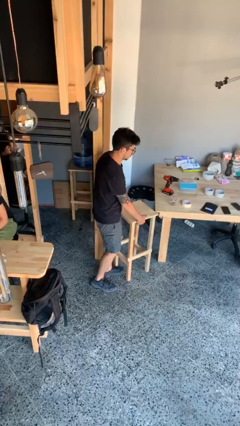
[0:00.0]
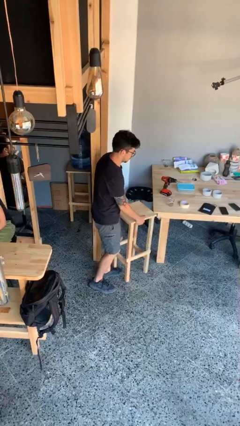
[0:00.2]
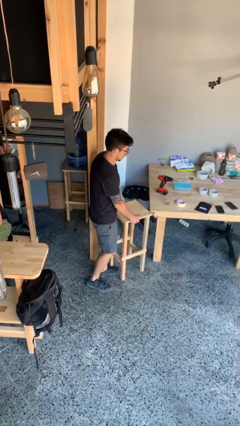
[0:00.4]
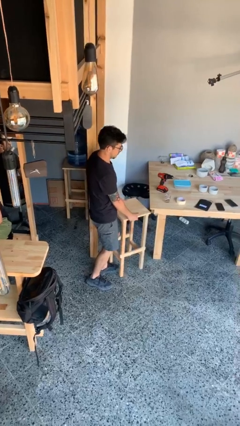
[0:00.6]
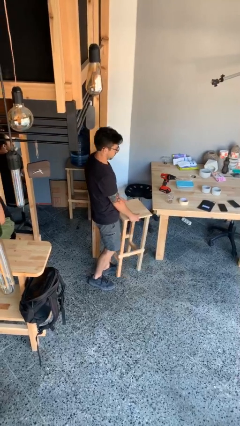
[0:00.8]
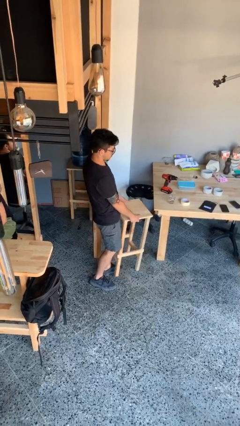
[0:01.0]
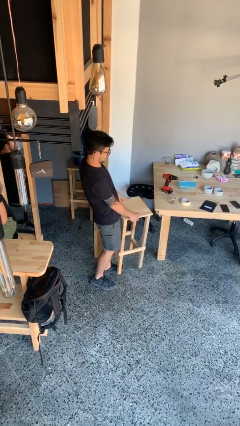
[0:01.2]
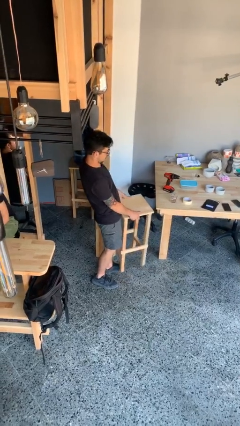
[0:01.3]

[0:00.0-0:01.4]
person picks up object from floor

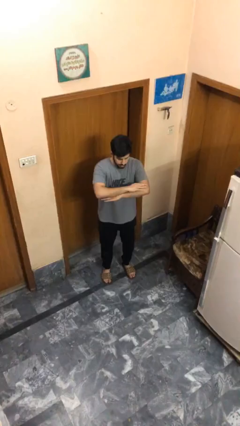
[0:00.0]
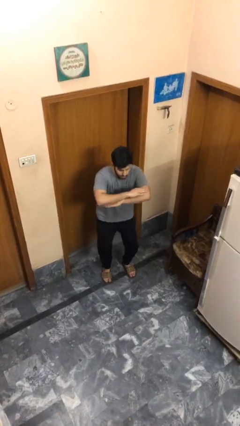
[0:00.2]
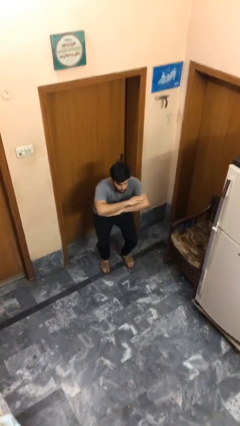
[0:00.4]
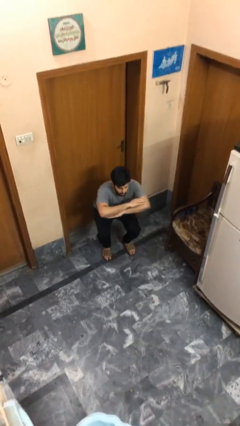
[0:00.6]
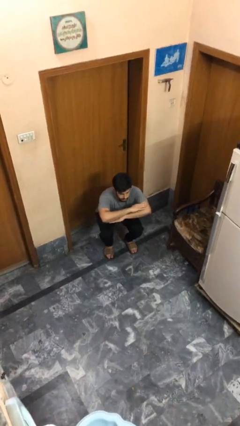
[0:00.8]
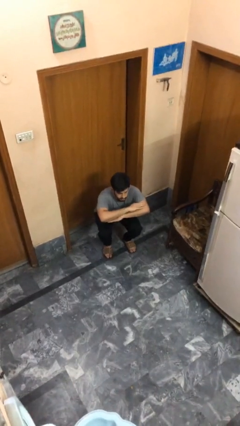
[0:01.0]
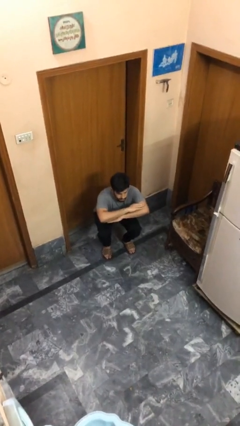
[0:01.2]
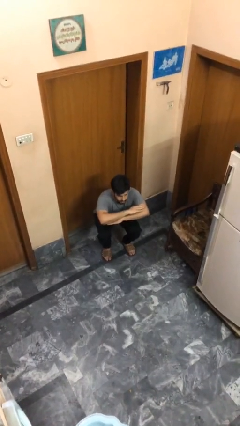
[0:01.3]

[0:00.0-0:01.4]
person squats

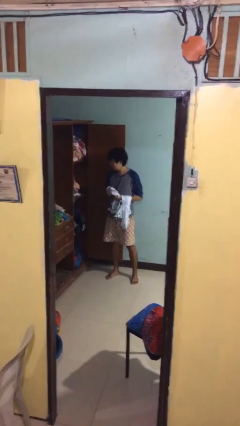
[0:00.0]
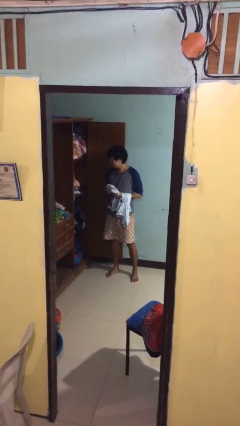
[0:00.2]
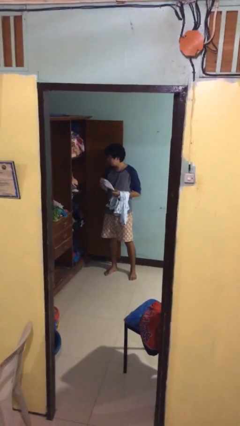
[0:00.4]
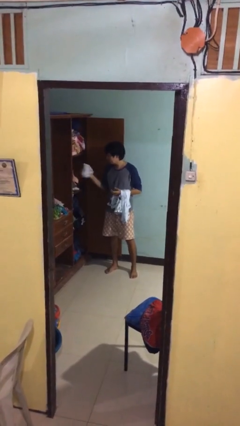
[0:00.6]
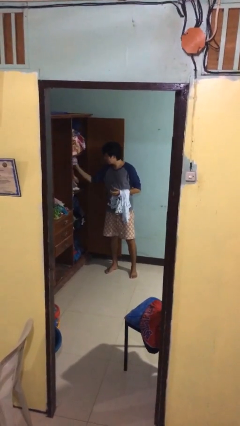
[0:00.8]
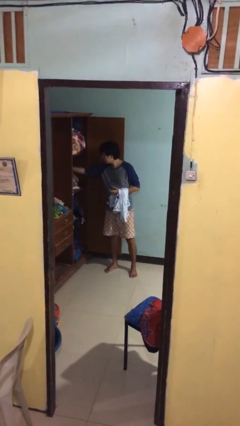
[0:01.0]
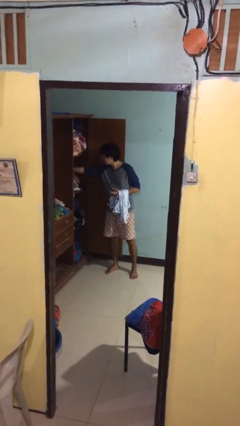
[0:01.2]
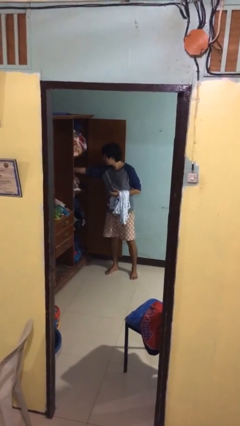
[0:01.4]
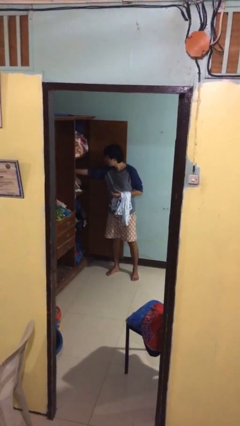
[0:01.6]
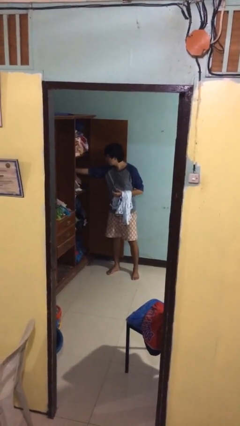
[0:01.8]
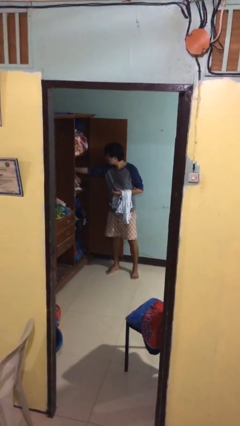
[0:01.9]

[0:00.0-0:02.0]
person puts clothes into dresser

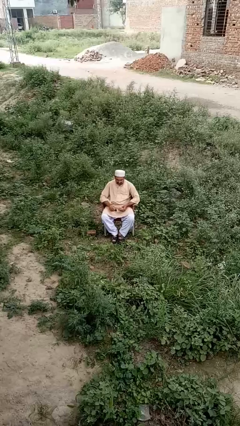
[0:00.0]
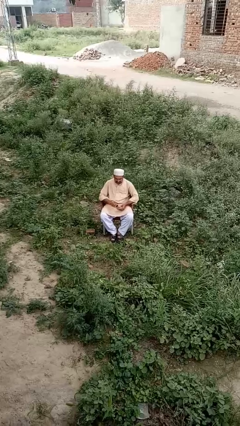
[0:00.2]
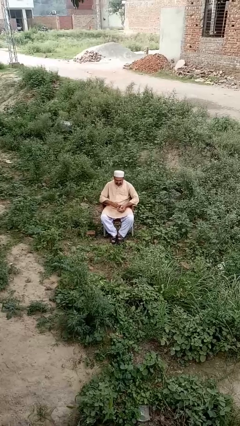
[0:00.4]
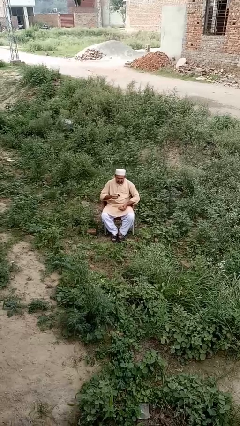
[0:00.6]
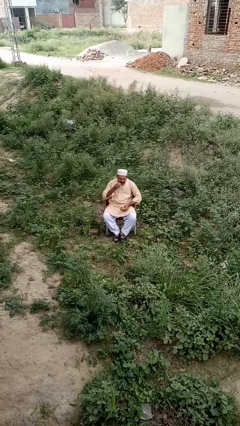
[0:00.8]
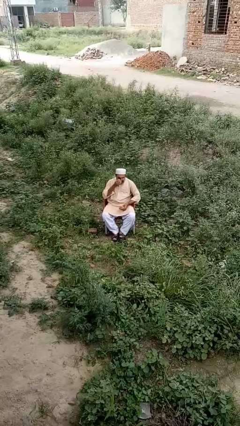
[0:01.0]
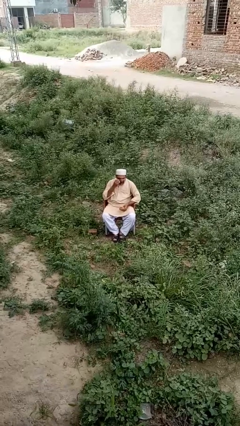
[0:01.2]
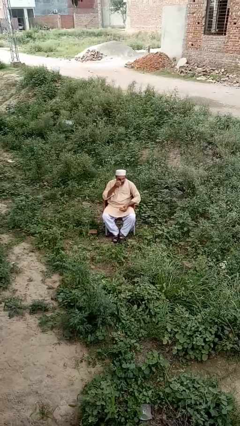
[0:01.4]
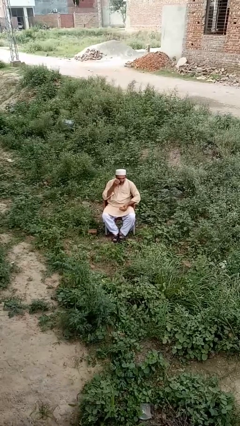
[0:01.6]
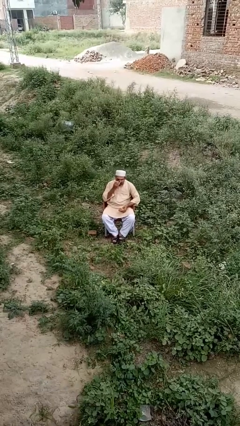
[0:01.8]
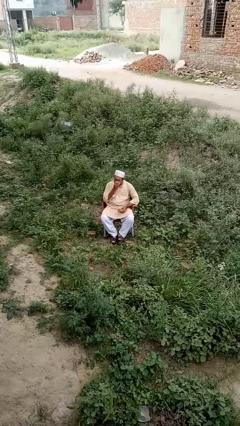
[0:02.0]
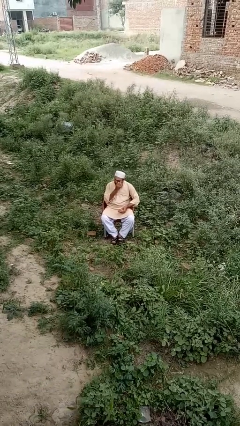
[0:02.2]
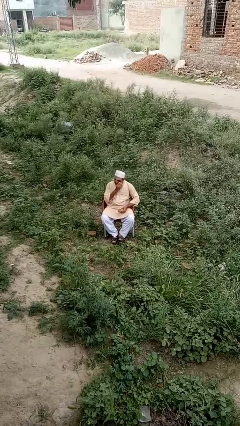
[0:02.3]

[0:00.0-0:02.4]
person shades eyes

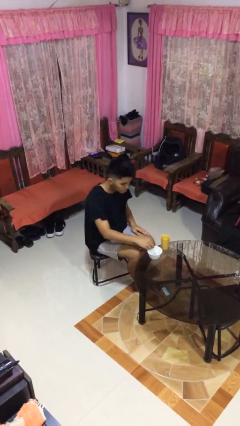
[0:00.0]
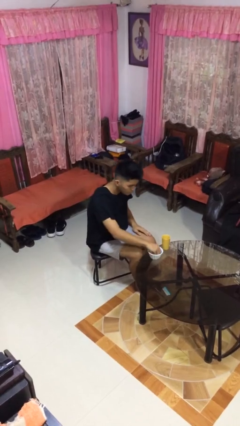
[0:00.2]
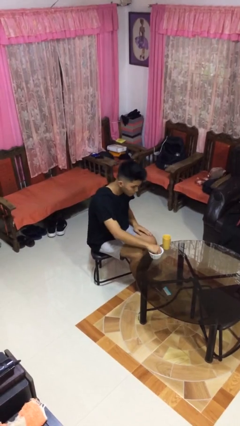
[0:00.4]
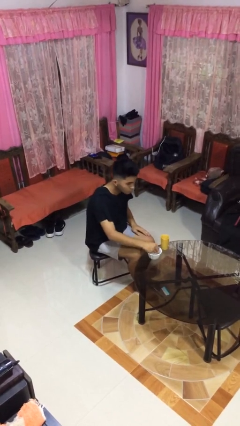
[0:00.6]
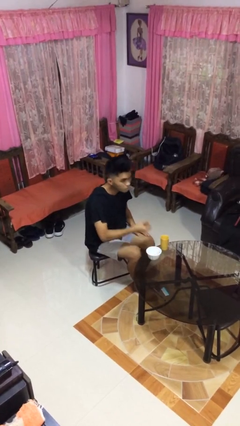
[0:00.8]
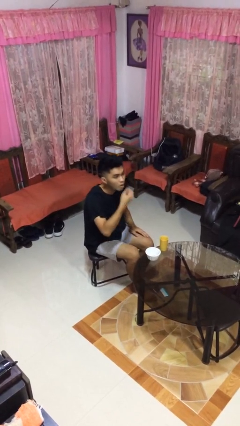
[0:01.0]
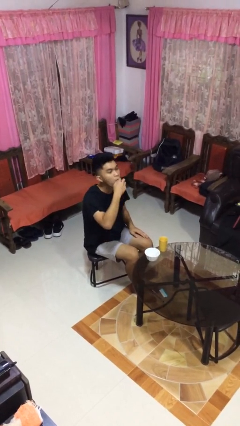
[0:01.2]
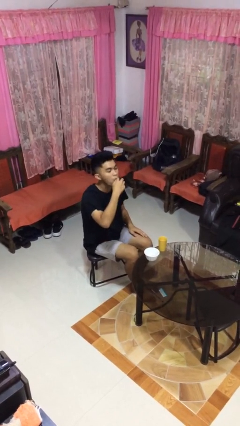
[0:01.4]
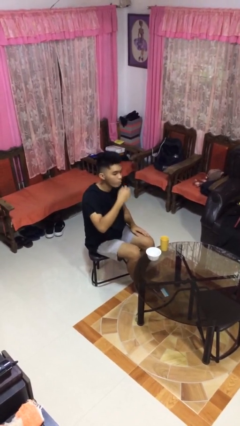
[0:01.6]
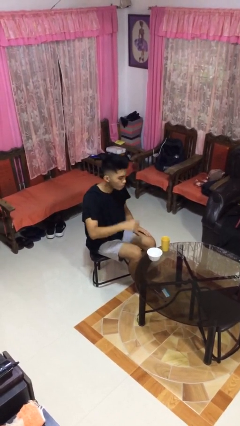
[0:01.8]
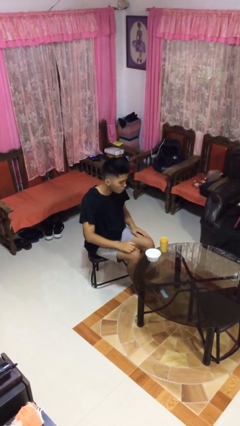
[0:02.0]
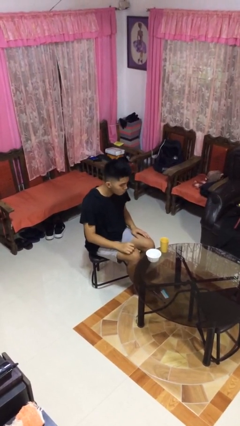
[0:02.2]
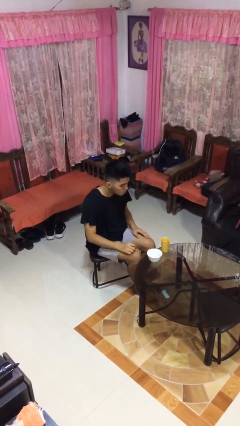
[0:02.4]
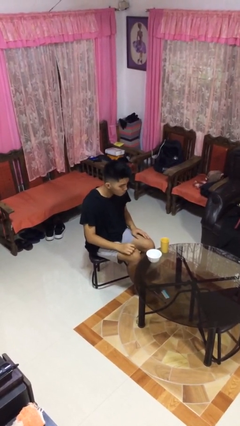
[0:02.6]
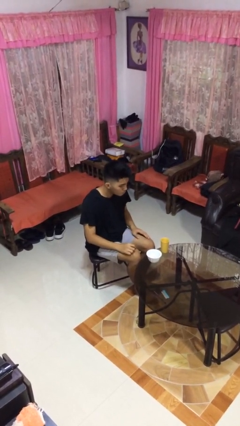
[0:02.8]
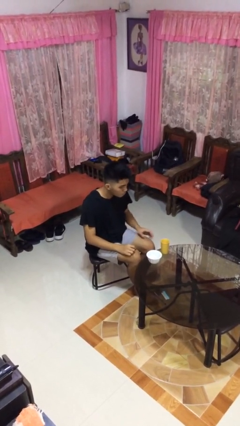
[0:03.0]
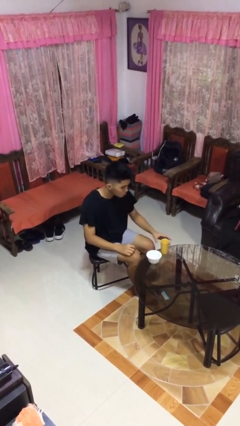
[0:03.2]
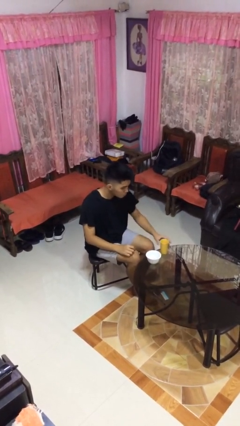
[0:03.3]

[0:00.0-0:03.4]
person takes medicine pills

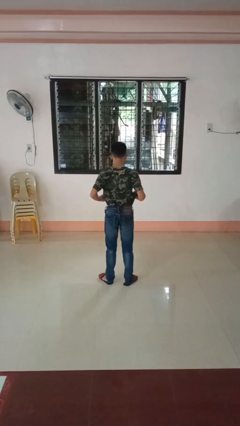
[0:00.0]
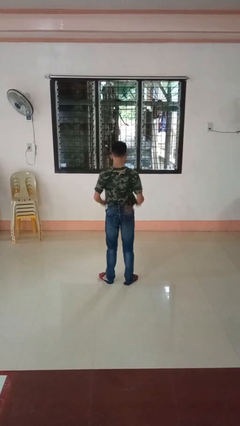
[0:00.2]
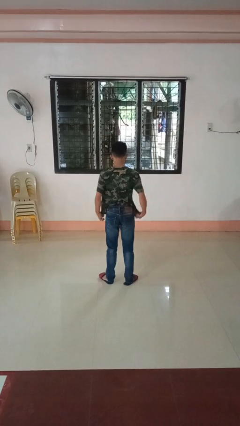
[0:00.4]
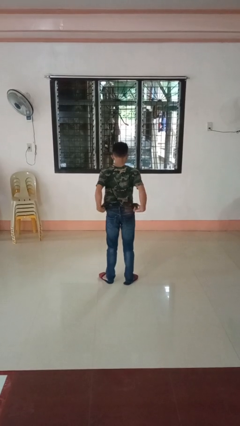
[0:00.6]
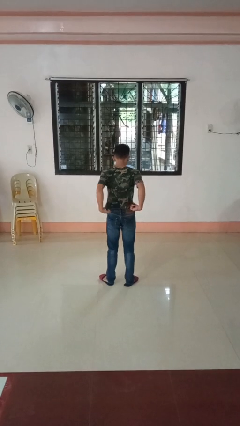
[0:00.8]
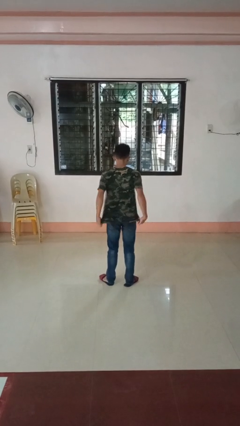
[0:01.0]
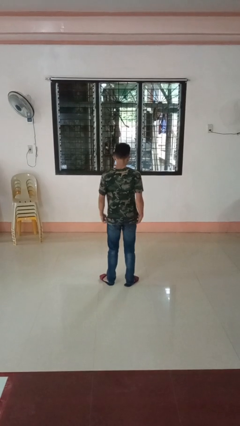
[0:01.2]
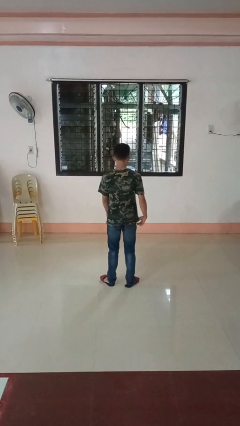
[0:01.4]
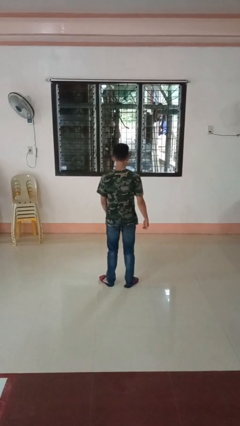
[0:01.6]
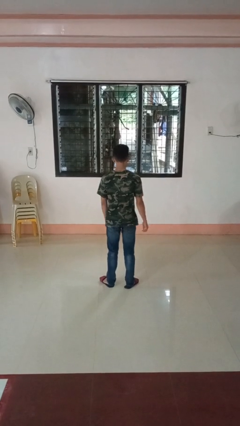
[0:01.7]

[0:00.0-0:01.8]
person untucks shirt

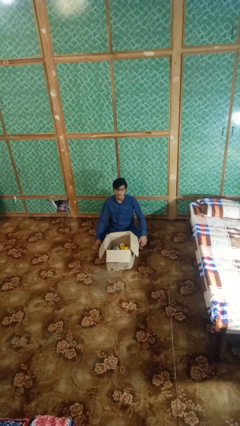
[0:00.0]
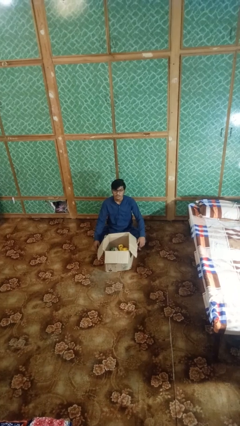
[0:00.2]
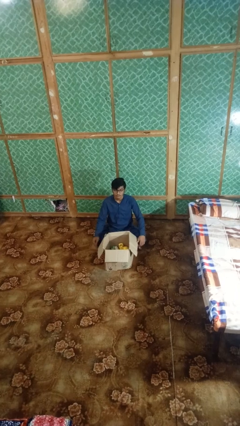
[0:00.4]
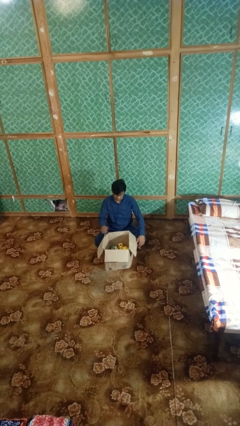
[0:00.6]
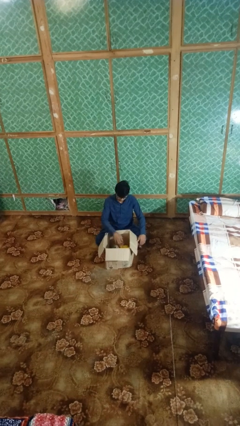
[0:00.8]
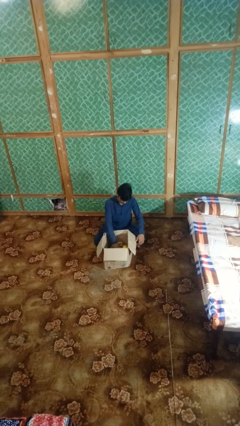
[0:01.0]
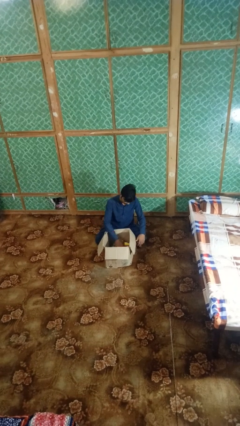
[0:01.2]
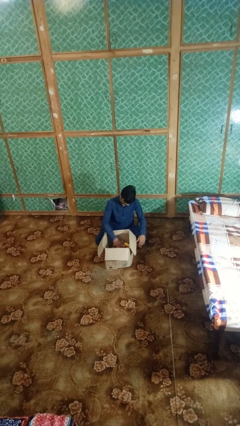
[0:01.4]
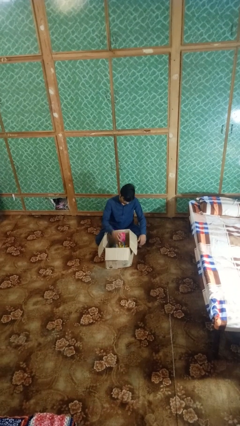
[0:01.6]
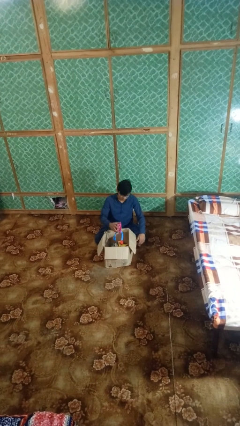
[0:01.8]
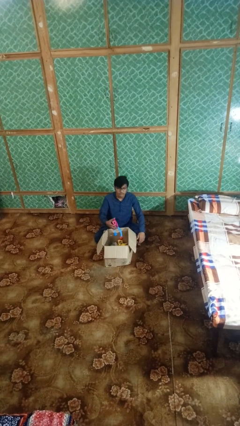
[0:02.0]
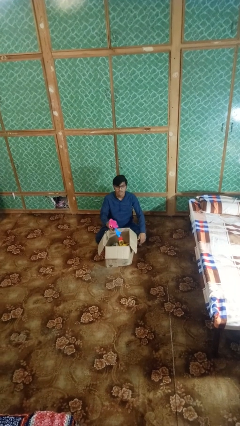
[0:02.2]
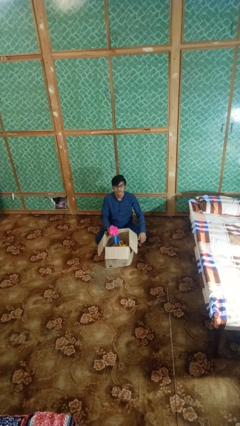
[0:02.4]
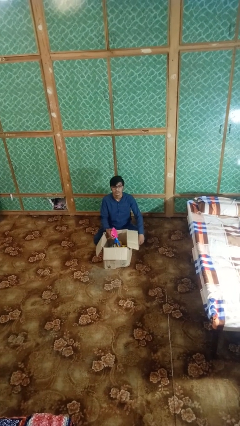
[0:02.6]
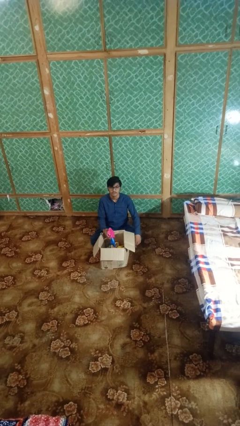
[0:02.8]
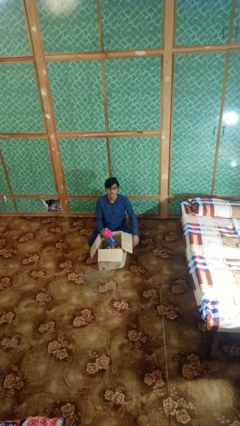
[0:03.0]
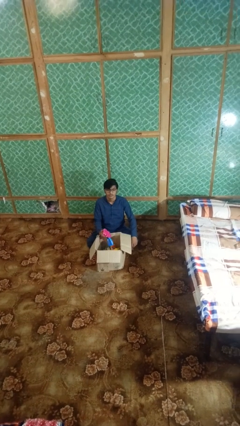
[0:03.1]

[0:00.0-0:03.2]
person takes object from box

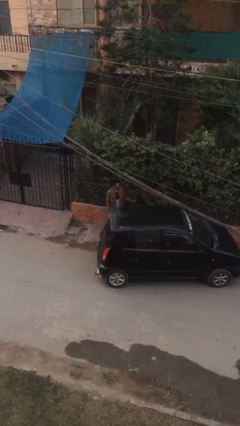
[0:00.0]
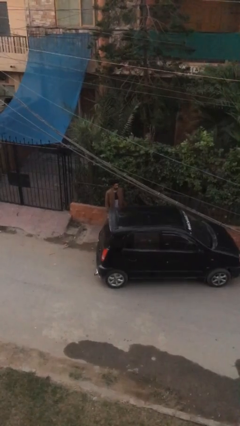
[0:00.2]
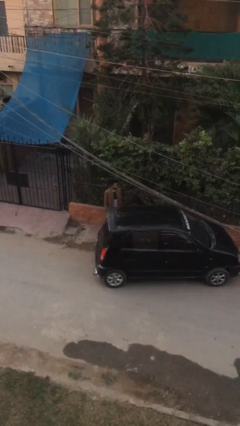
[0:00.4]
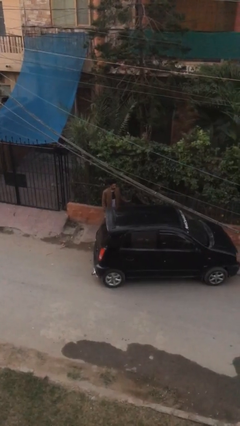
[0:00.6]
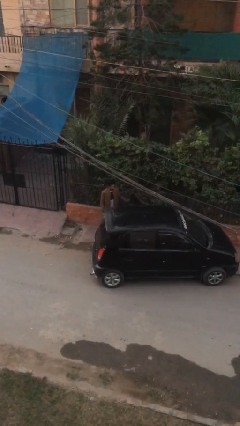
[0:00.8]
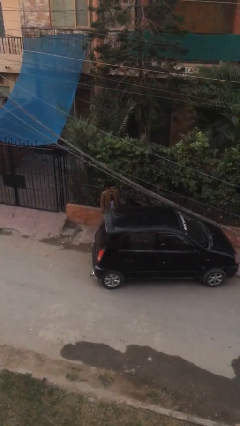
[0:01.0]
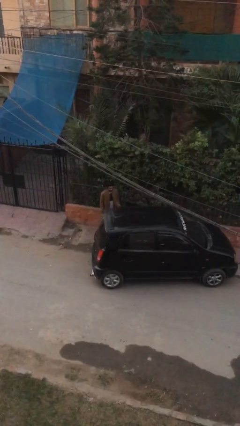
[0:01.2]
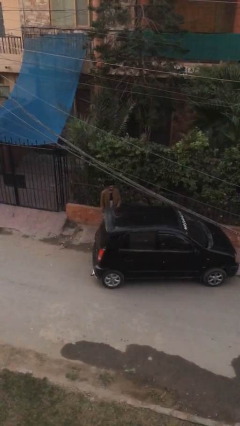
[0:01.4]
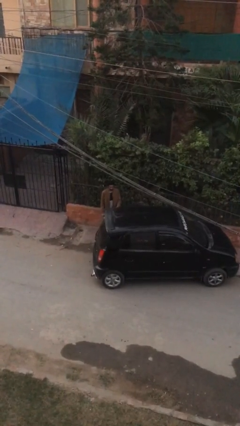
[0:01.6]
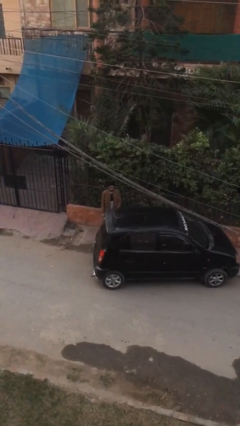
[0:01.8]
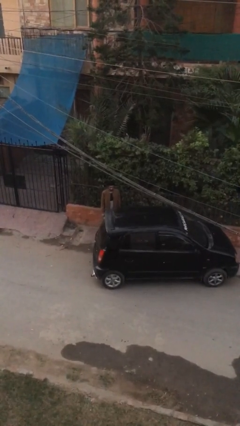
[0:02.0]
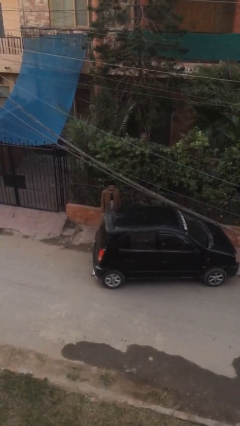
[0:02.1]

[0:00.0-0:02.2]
person closes car door
